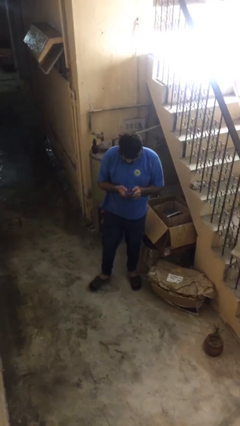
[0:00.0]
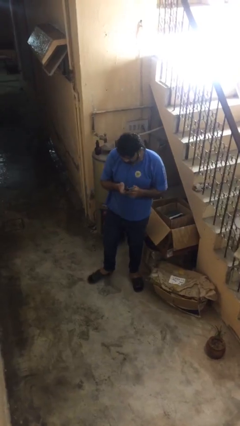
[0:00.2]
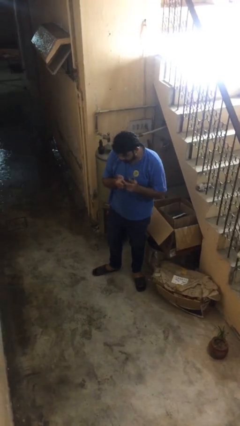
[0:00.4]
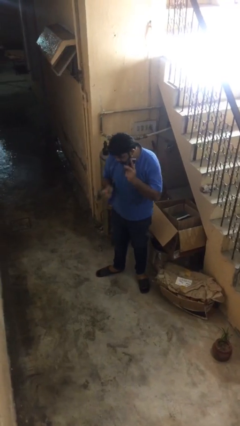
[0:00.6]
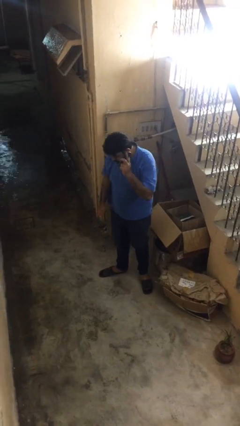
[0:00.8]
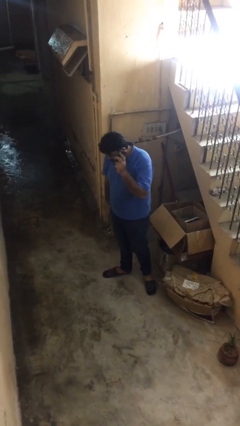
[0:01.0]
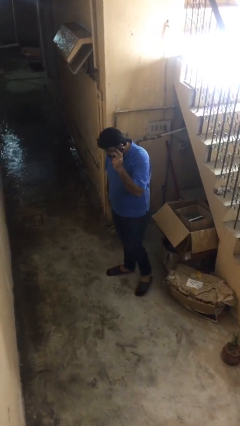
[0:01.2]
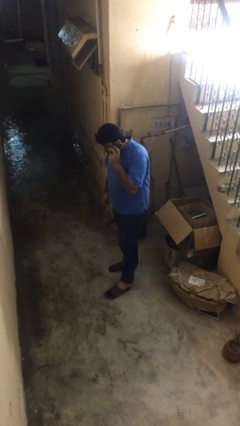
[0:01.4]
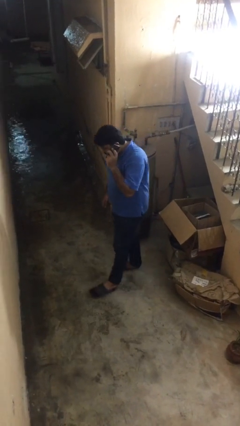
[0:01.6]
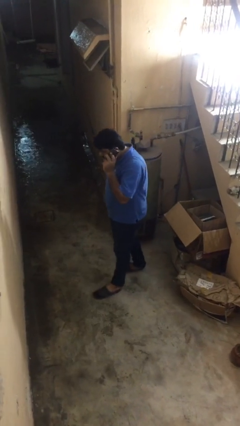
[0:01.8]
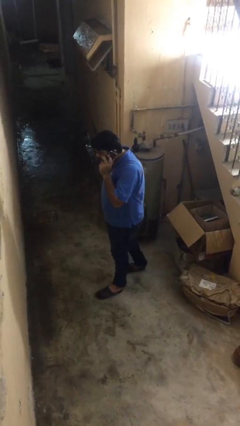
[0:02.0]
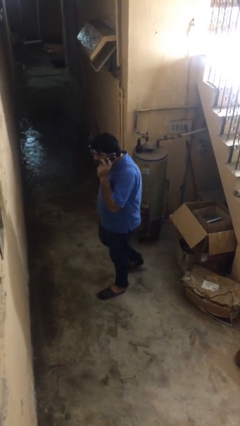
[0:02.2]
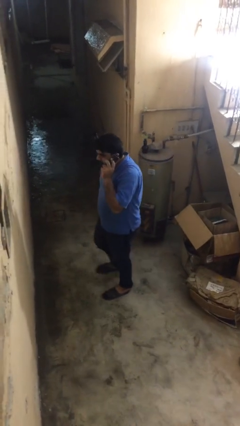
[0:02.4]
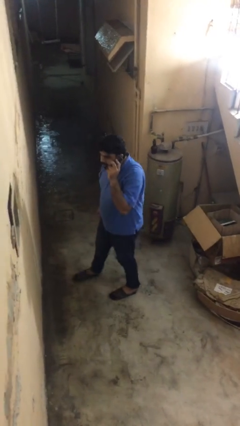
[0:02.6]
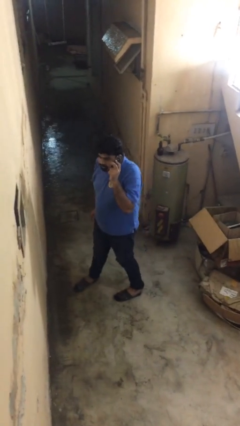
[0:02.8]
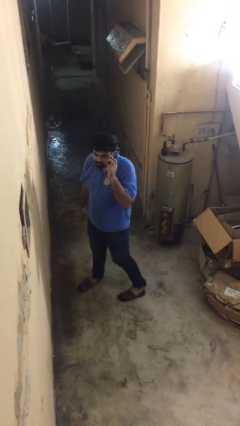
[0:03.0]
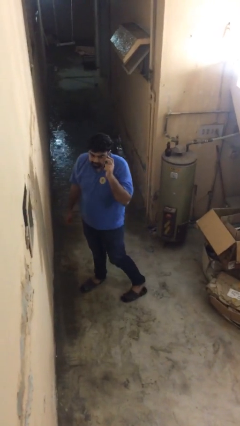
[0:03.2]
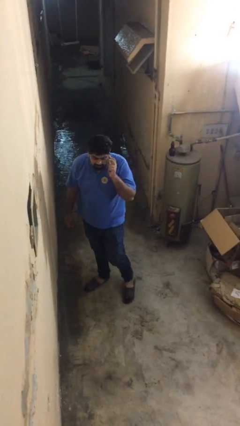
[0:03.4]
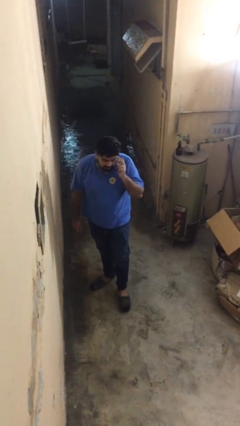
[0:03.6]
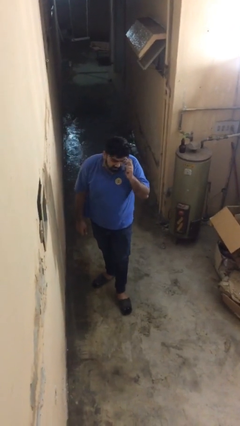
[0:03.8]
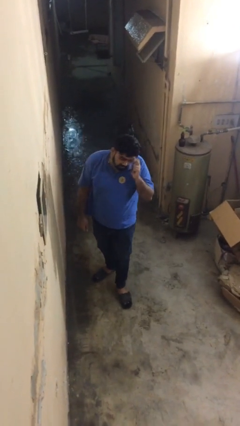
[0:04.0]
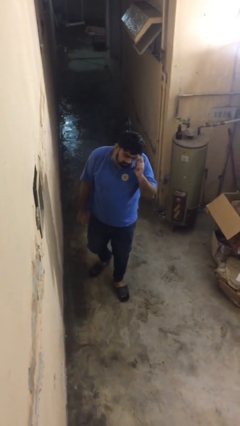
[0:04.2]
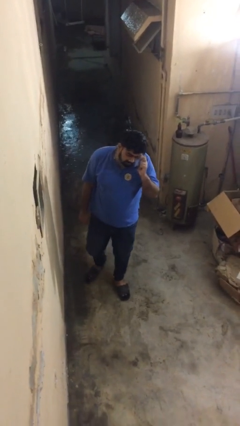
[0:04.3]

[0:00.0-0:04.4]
person talks on phone

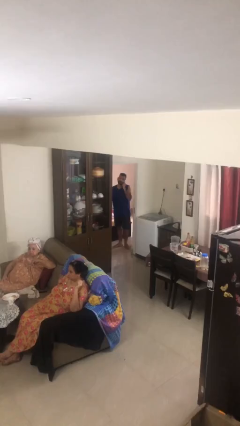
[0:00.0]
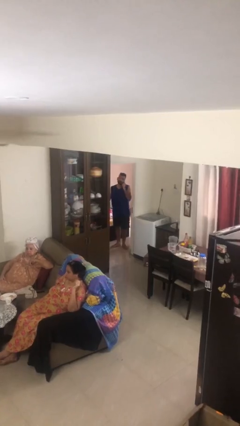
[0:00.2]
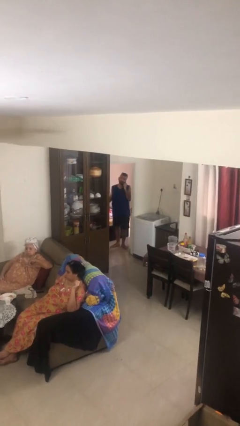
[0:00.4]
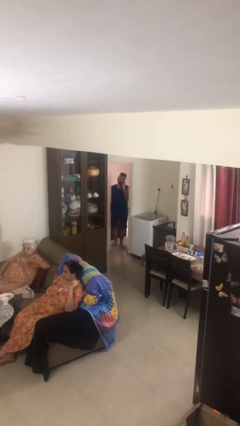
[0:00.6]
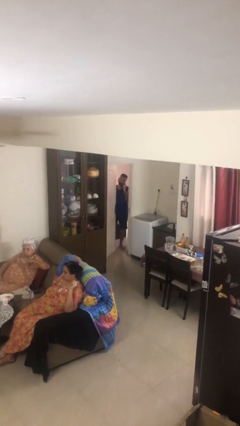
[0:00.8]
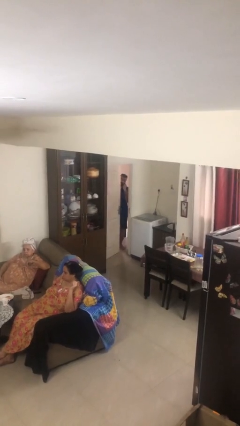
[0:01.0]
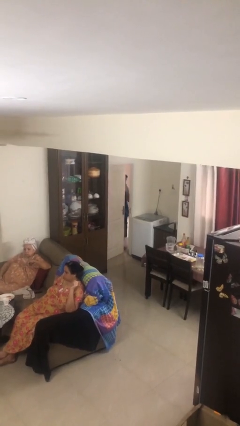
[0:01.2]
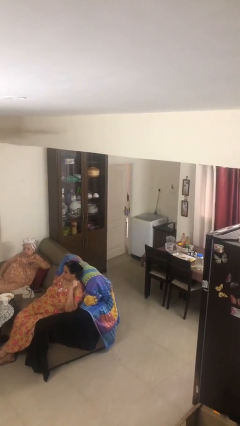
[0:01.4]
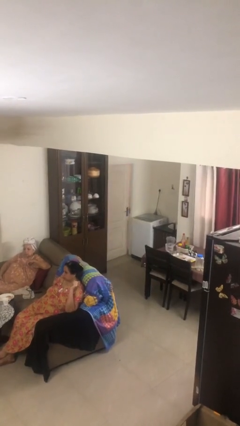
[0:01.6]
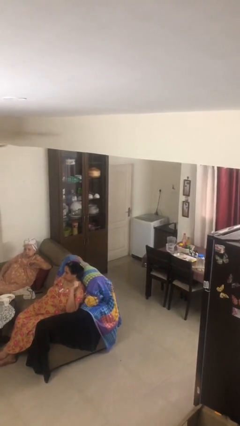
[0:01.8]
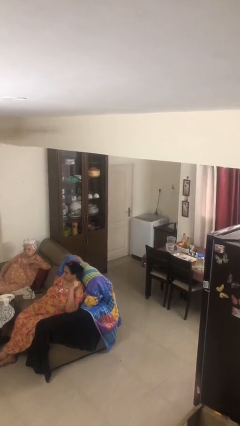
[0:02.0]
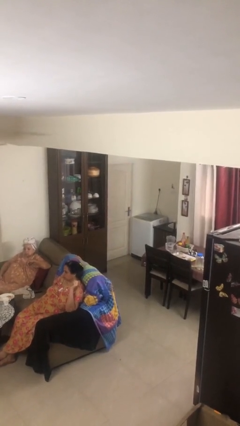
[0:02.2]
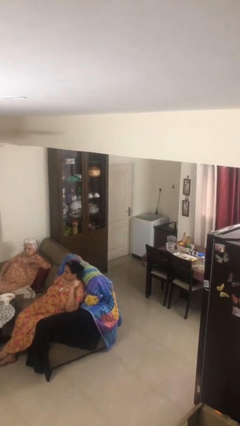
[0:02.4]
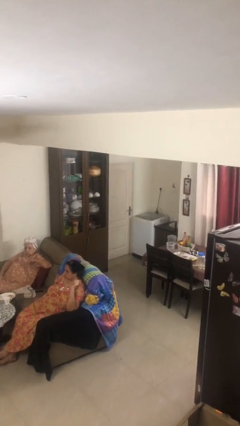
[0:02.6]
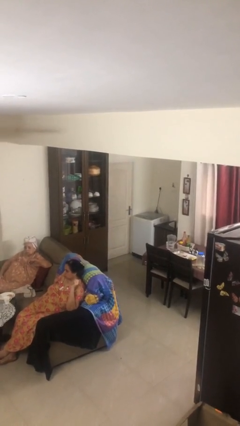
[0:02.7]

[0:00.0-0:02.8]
person closes facility door

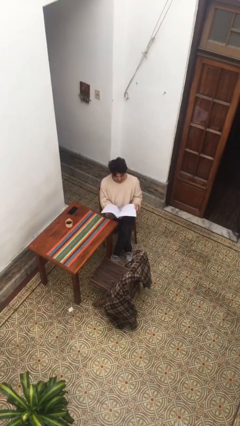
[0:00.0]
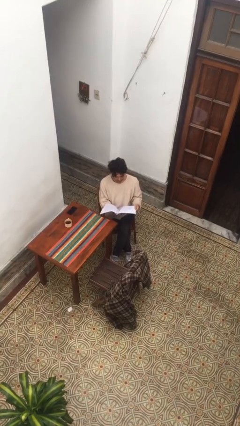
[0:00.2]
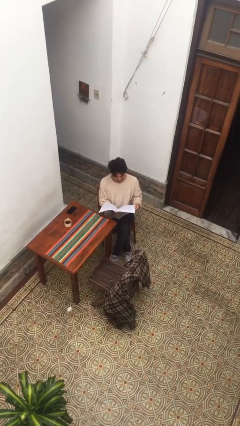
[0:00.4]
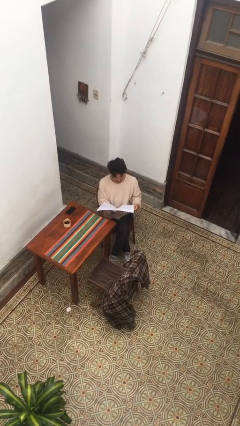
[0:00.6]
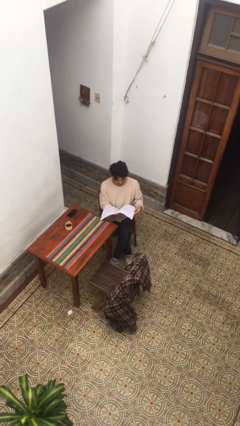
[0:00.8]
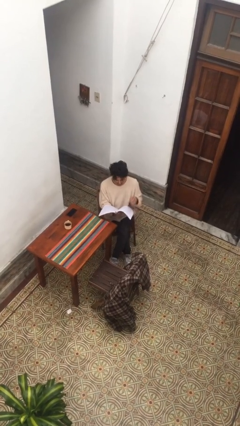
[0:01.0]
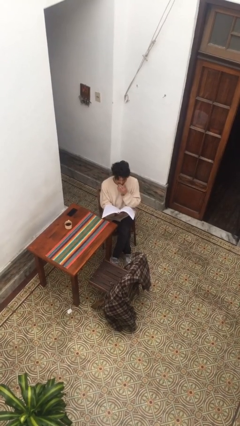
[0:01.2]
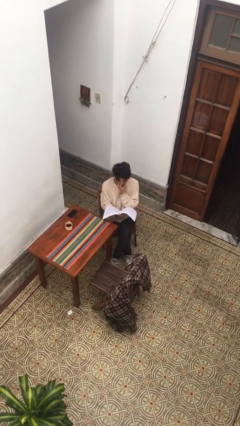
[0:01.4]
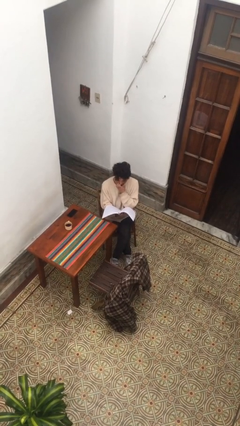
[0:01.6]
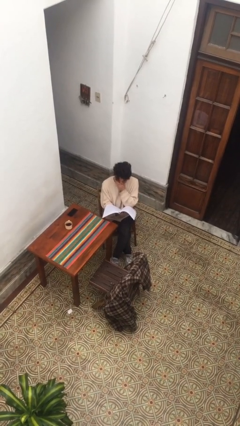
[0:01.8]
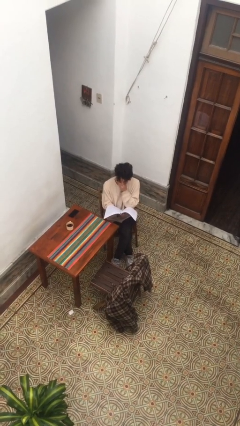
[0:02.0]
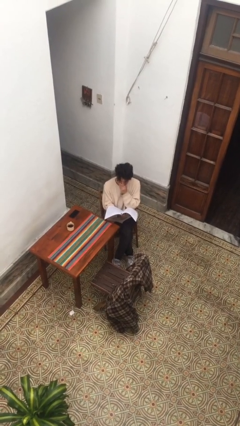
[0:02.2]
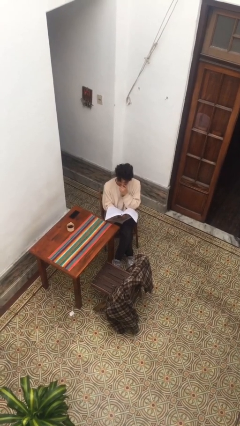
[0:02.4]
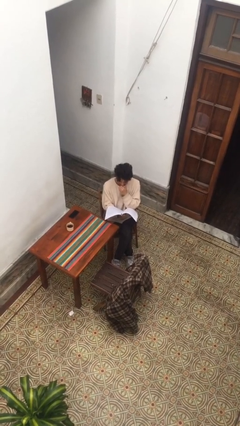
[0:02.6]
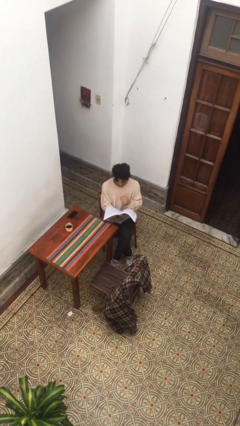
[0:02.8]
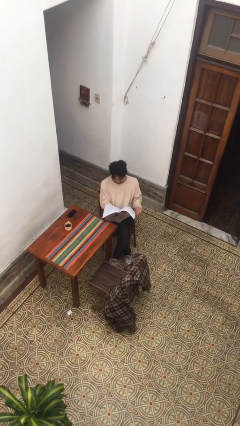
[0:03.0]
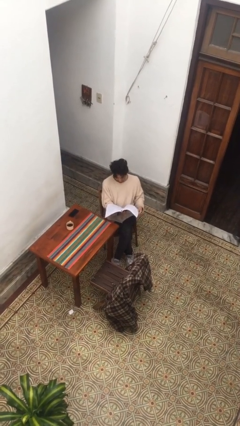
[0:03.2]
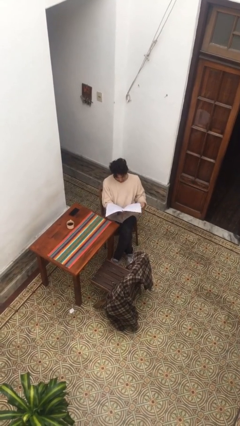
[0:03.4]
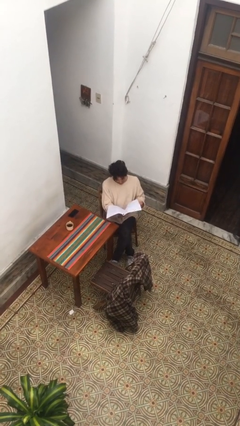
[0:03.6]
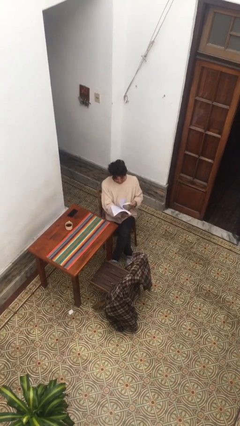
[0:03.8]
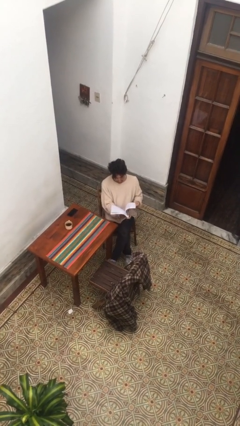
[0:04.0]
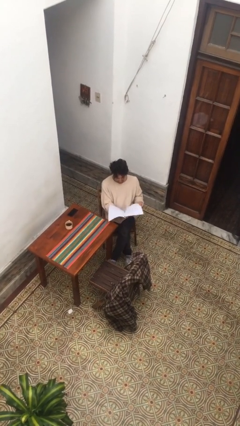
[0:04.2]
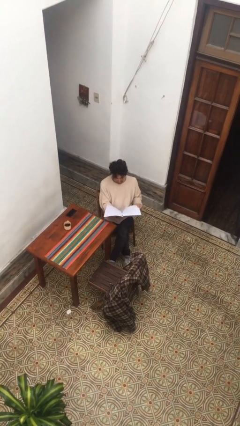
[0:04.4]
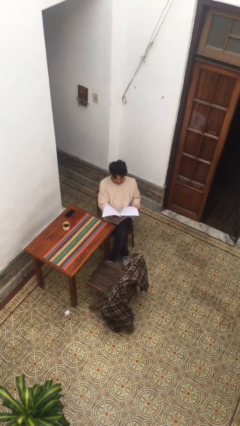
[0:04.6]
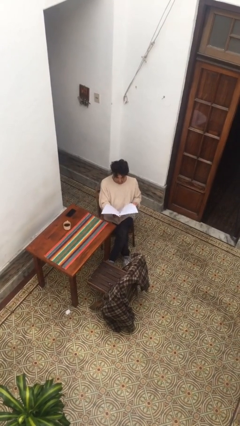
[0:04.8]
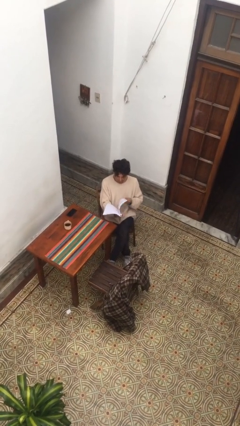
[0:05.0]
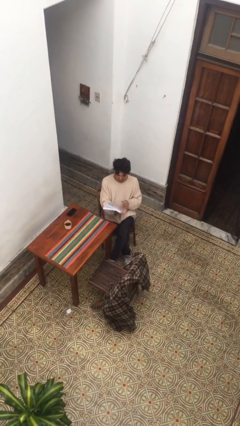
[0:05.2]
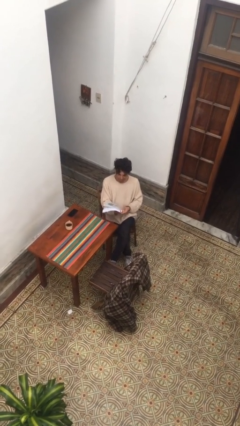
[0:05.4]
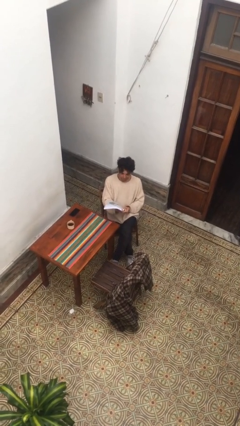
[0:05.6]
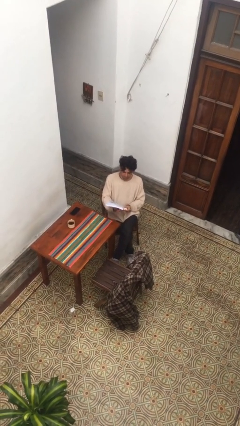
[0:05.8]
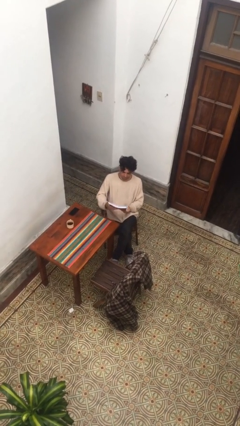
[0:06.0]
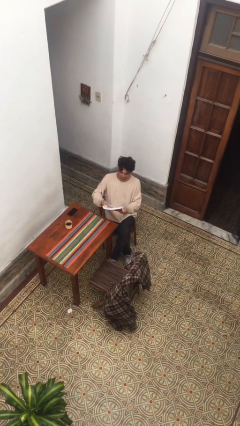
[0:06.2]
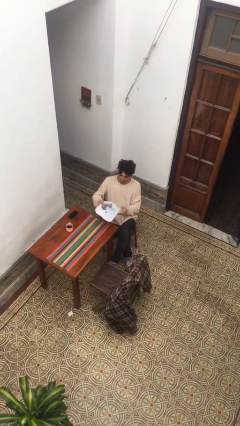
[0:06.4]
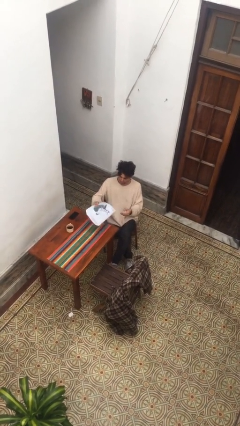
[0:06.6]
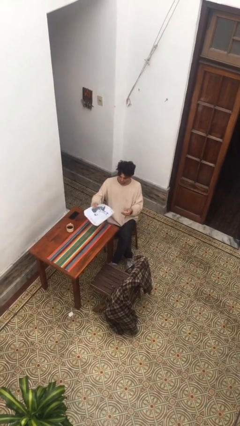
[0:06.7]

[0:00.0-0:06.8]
person reads document

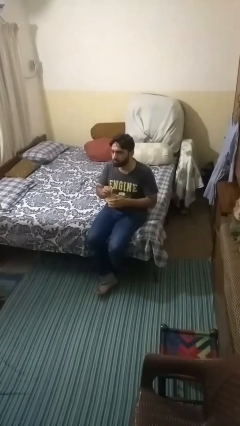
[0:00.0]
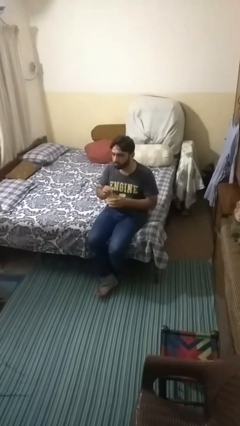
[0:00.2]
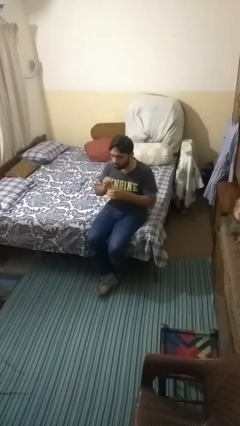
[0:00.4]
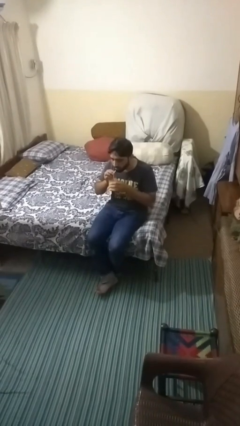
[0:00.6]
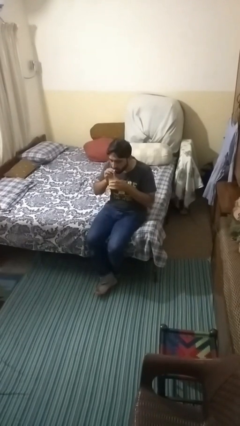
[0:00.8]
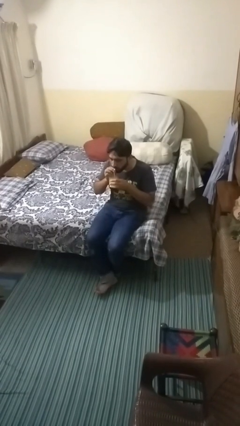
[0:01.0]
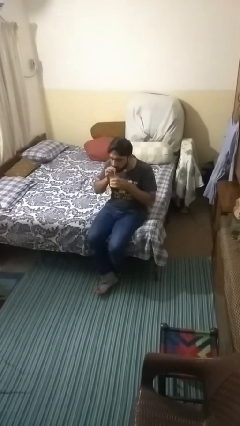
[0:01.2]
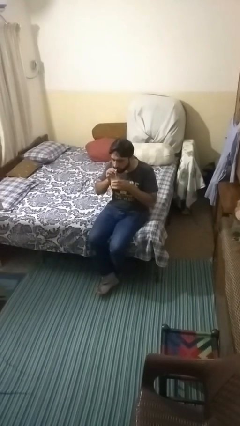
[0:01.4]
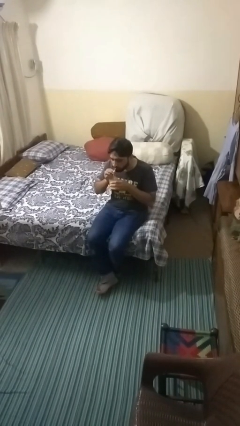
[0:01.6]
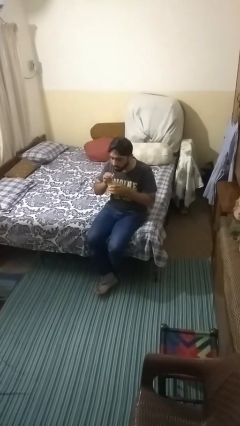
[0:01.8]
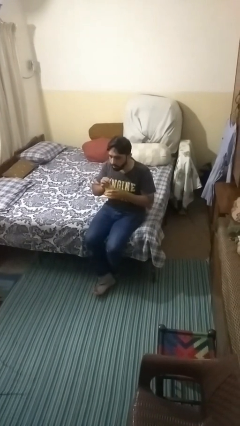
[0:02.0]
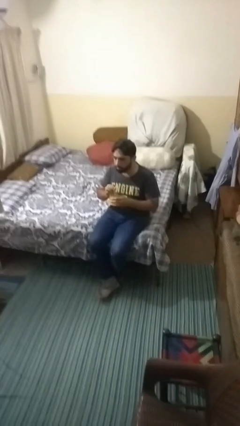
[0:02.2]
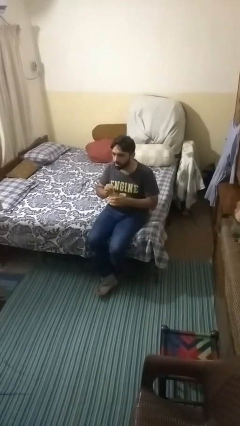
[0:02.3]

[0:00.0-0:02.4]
person drinks from straw

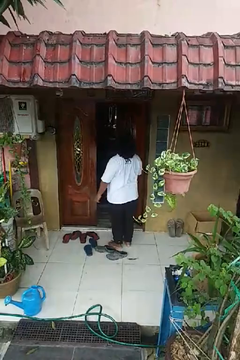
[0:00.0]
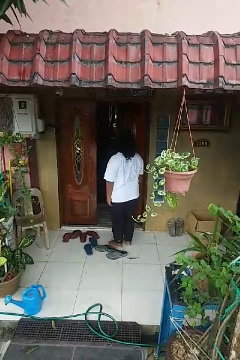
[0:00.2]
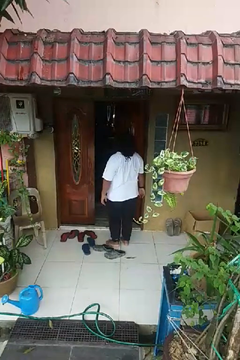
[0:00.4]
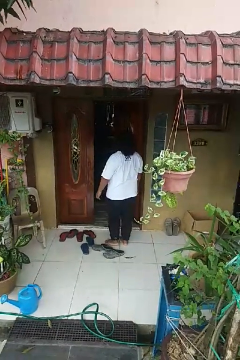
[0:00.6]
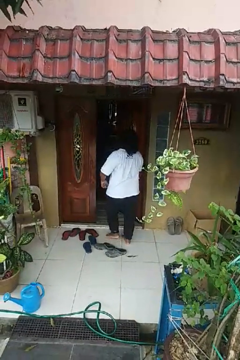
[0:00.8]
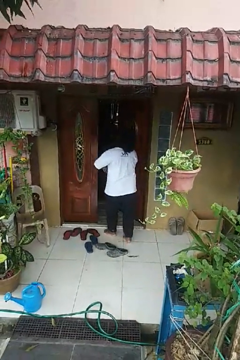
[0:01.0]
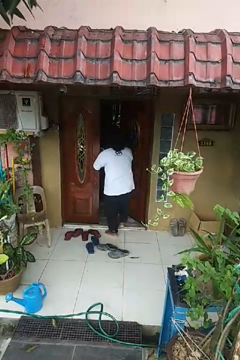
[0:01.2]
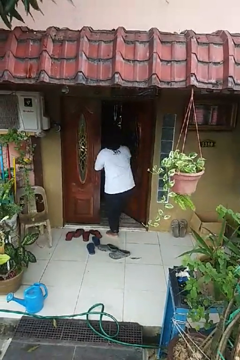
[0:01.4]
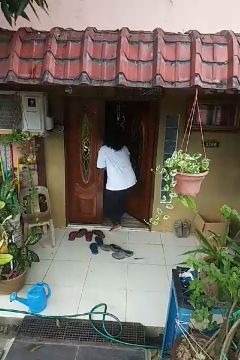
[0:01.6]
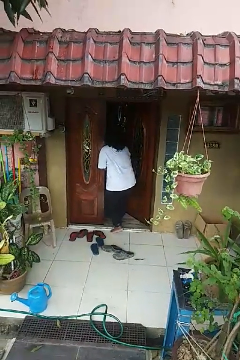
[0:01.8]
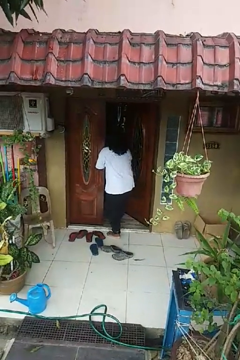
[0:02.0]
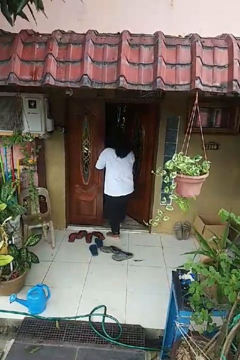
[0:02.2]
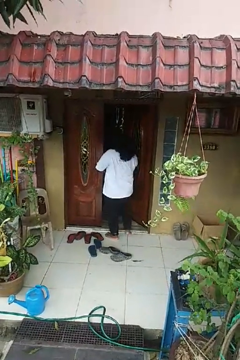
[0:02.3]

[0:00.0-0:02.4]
person bumps into wall
